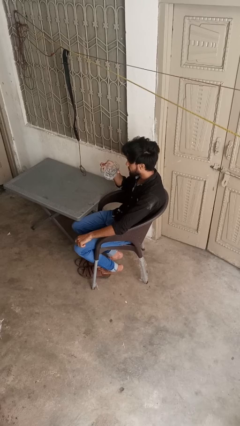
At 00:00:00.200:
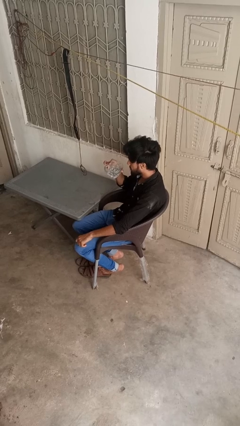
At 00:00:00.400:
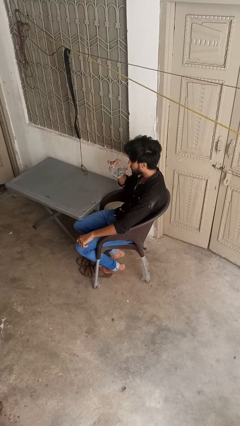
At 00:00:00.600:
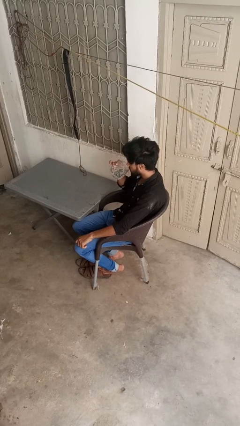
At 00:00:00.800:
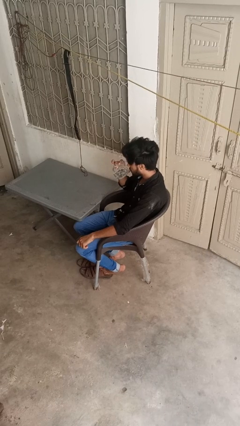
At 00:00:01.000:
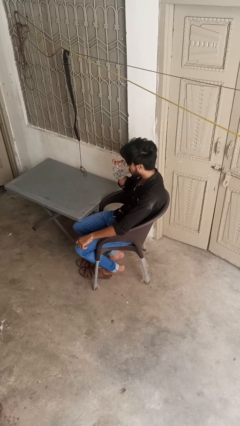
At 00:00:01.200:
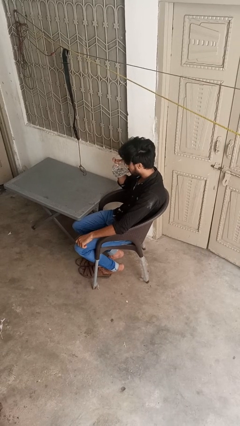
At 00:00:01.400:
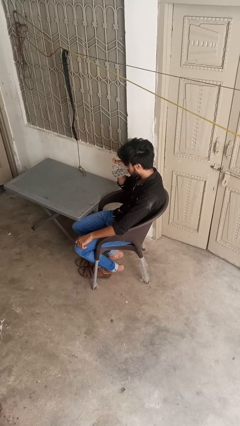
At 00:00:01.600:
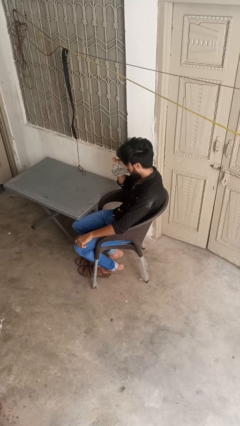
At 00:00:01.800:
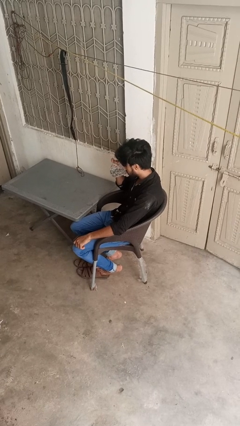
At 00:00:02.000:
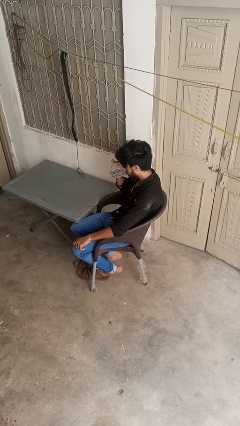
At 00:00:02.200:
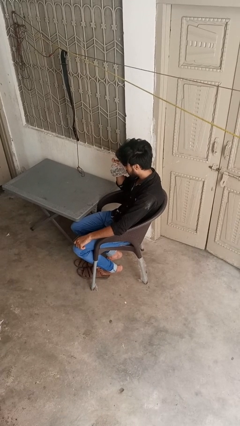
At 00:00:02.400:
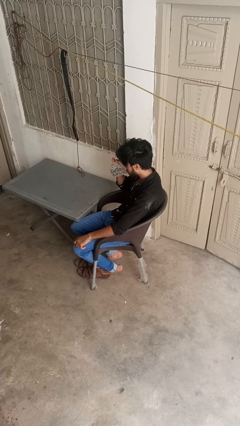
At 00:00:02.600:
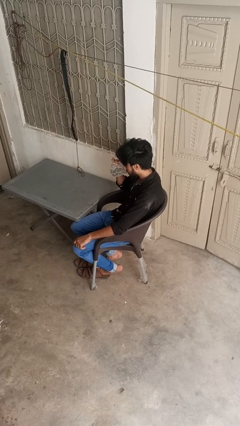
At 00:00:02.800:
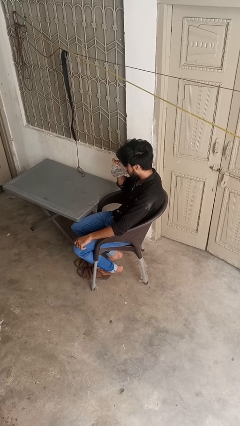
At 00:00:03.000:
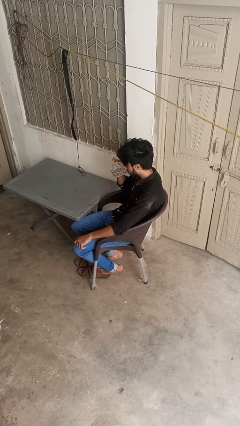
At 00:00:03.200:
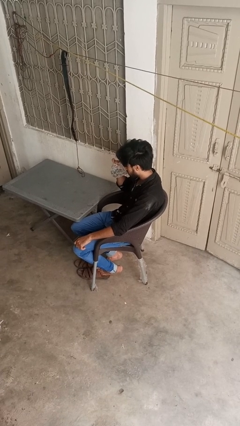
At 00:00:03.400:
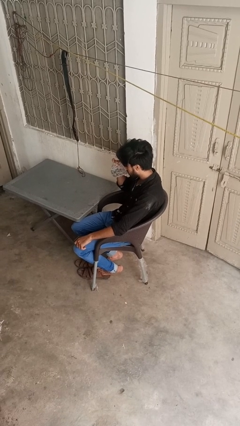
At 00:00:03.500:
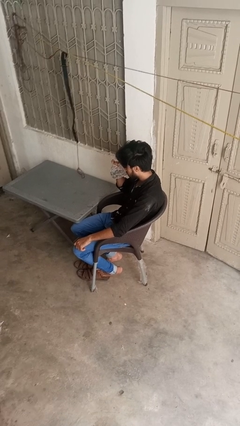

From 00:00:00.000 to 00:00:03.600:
person drinks from mug

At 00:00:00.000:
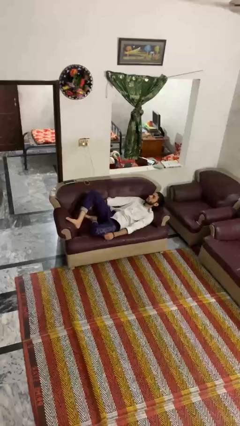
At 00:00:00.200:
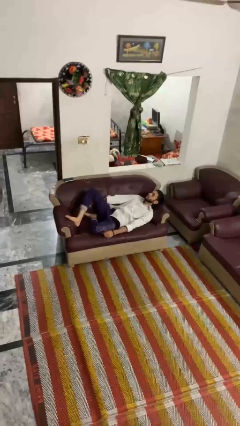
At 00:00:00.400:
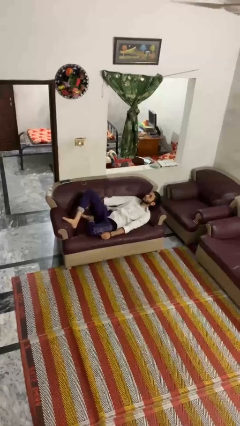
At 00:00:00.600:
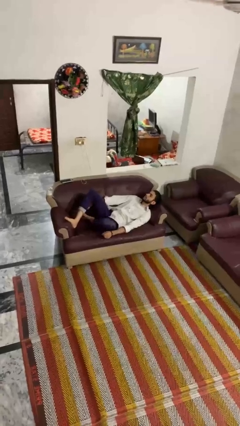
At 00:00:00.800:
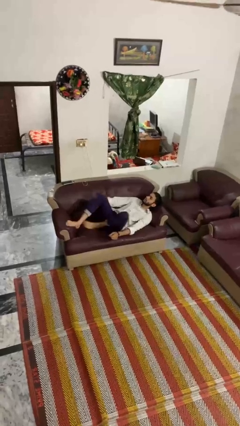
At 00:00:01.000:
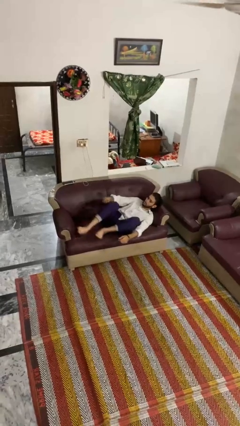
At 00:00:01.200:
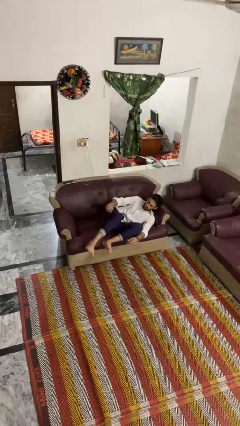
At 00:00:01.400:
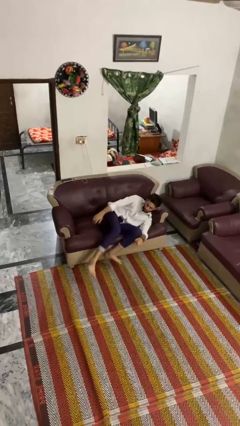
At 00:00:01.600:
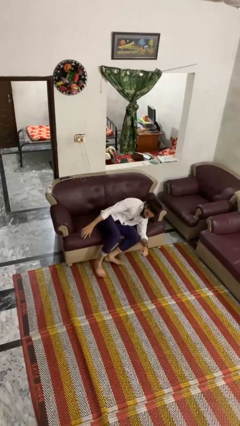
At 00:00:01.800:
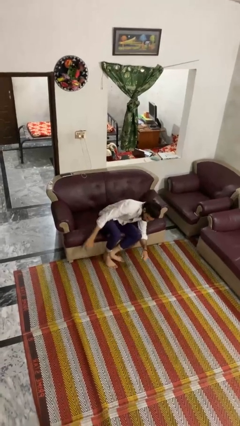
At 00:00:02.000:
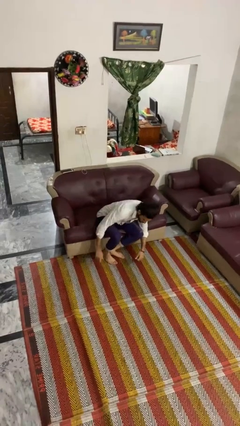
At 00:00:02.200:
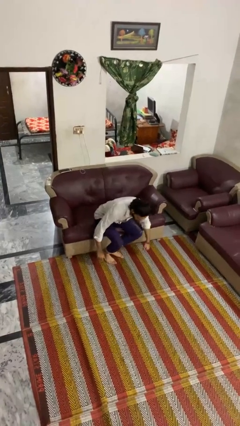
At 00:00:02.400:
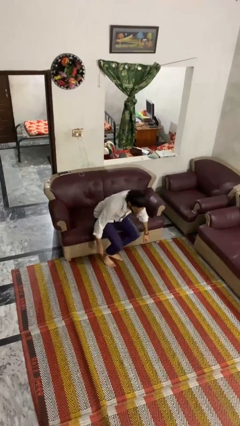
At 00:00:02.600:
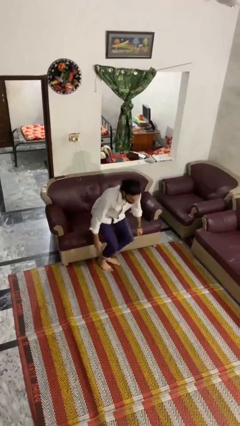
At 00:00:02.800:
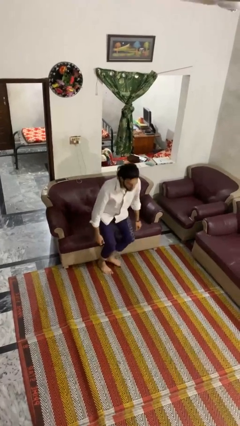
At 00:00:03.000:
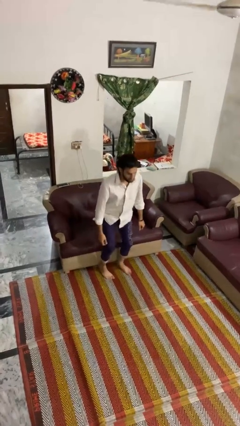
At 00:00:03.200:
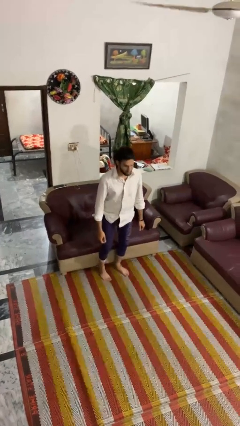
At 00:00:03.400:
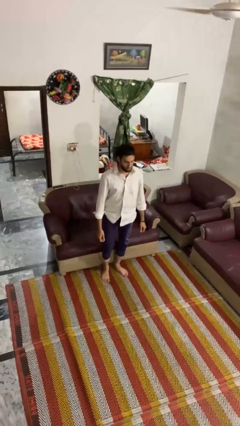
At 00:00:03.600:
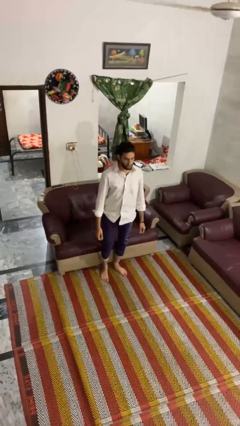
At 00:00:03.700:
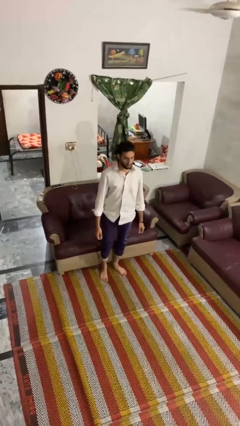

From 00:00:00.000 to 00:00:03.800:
person stands up

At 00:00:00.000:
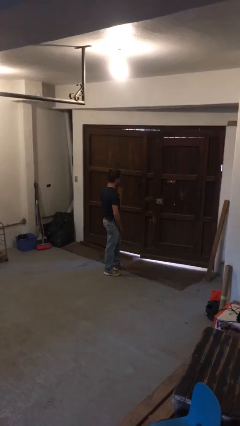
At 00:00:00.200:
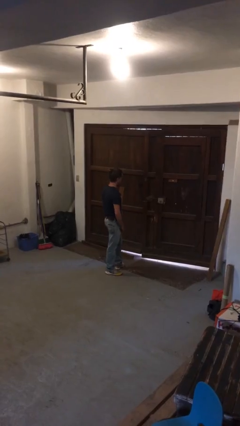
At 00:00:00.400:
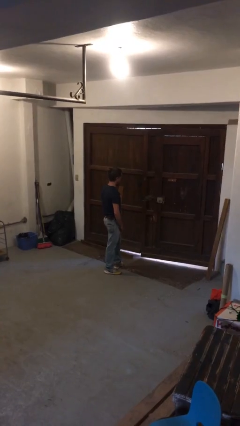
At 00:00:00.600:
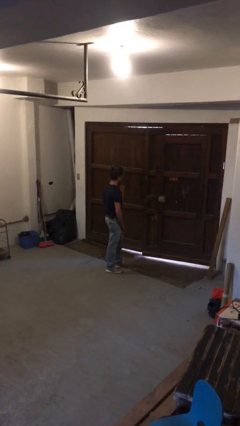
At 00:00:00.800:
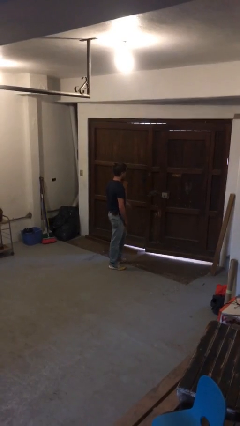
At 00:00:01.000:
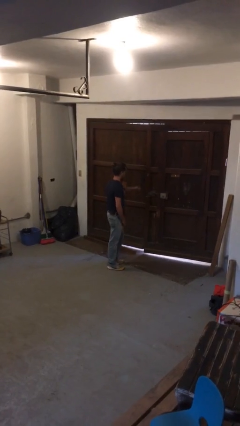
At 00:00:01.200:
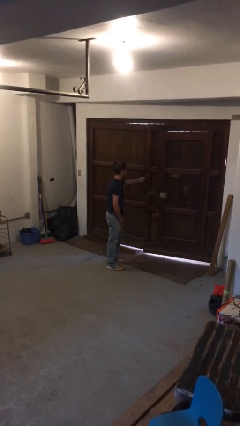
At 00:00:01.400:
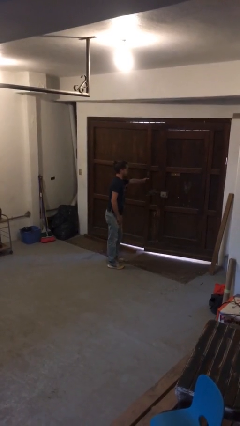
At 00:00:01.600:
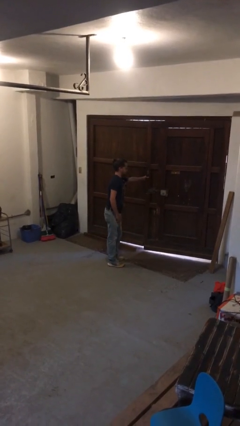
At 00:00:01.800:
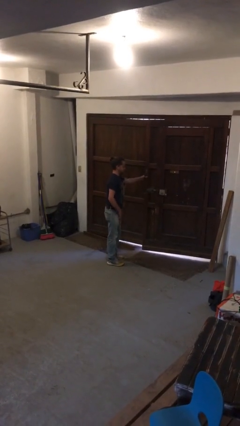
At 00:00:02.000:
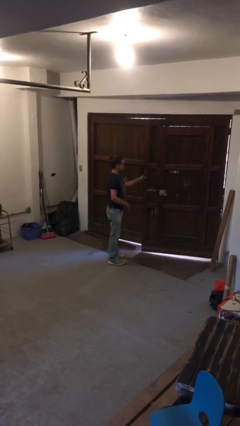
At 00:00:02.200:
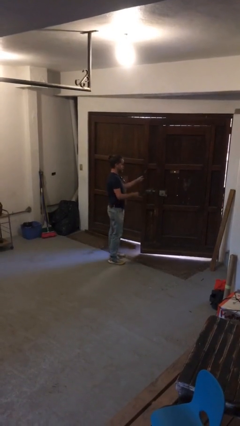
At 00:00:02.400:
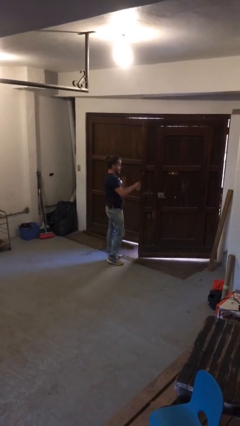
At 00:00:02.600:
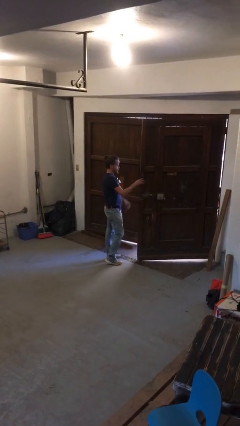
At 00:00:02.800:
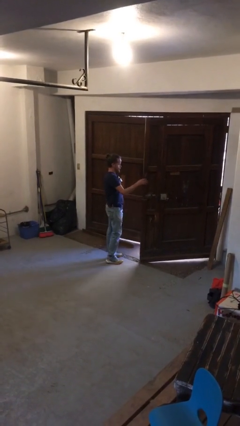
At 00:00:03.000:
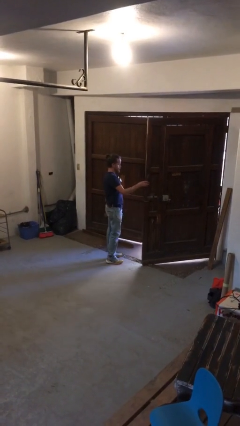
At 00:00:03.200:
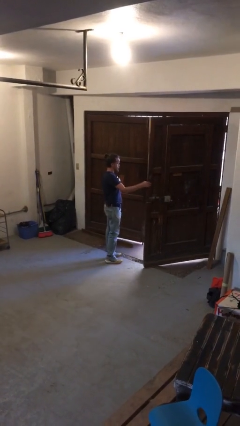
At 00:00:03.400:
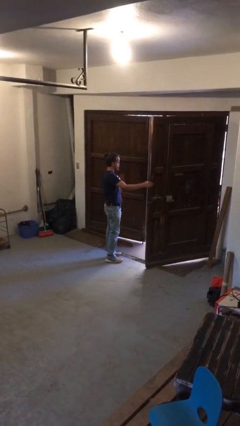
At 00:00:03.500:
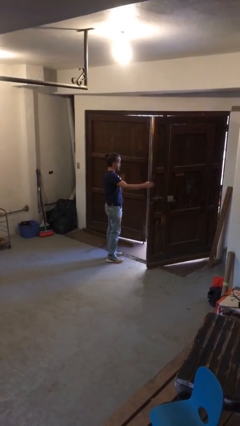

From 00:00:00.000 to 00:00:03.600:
person opens gate

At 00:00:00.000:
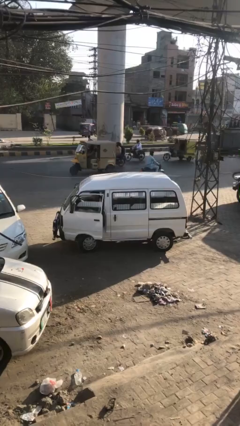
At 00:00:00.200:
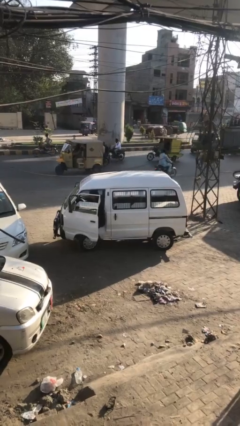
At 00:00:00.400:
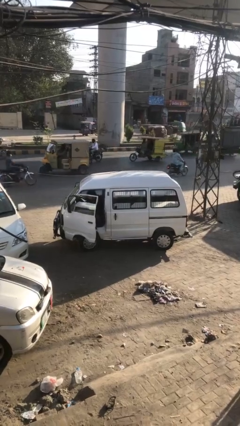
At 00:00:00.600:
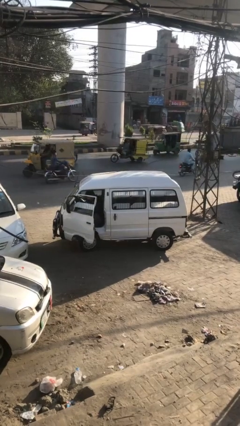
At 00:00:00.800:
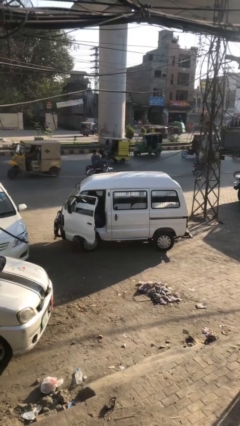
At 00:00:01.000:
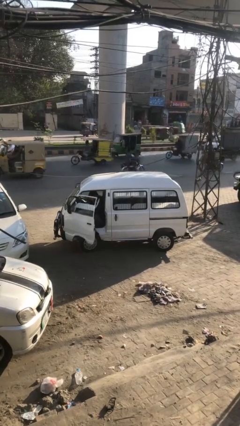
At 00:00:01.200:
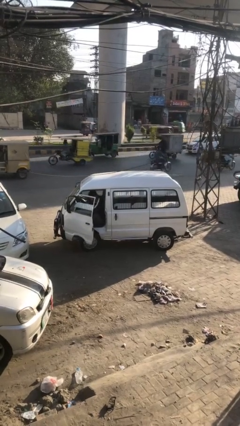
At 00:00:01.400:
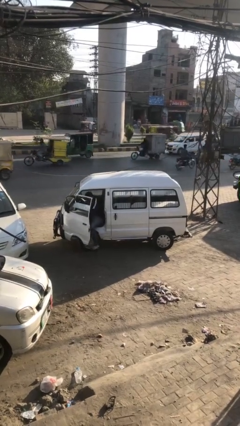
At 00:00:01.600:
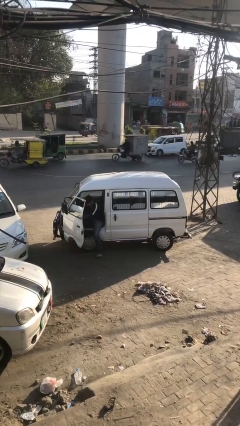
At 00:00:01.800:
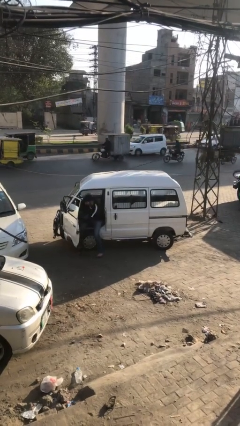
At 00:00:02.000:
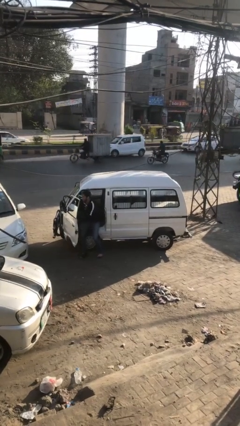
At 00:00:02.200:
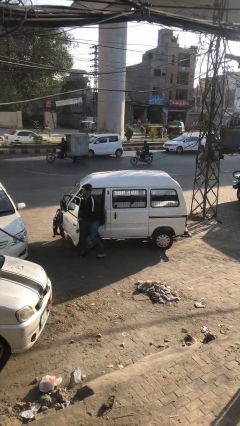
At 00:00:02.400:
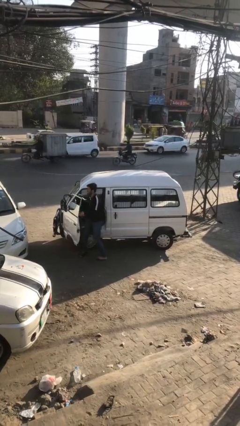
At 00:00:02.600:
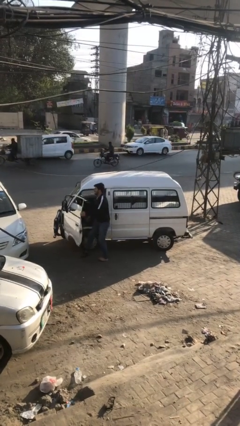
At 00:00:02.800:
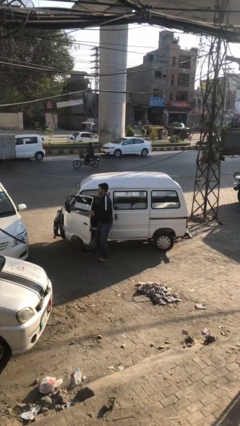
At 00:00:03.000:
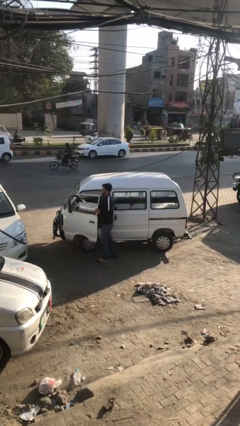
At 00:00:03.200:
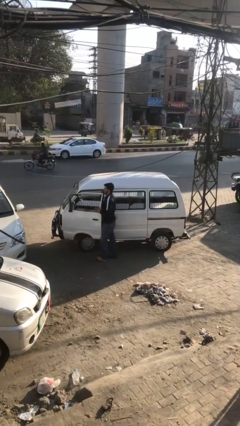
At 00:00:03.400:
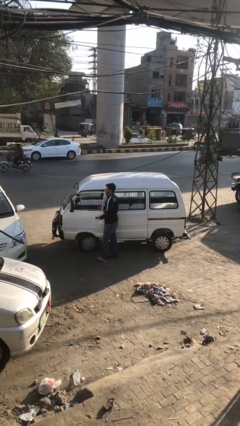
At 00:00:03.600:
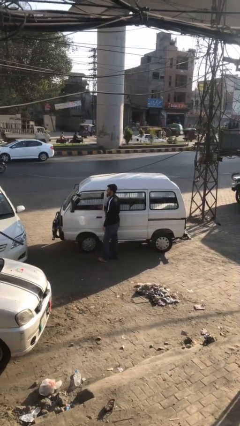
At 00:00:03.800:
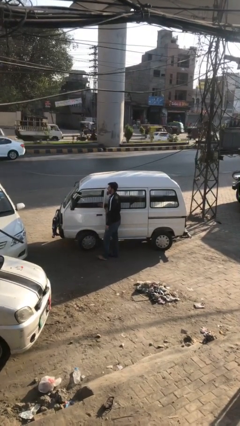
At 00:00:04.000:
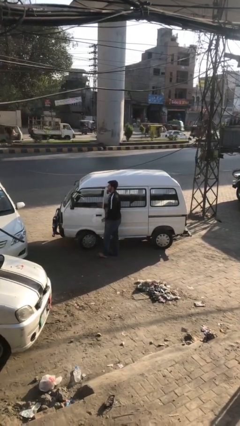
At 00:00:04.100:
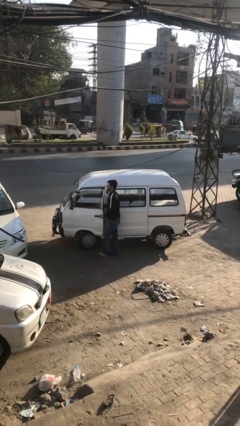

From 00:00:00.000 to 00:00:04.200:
car drops off person

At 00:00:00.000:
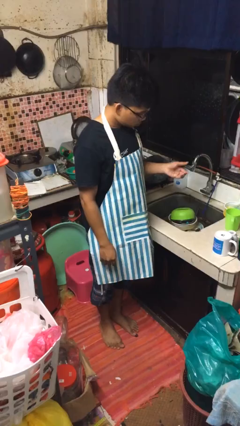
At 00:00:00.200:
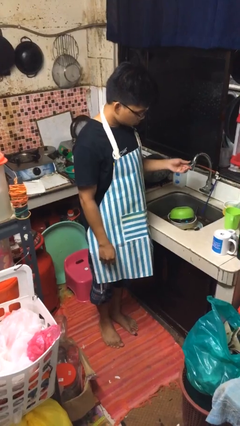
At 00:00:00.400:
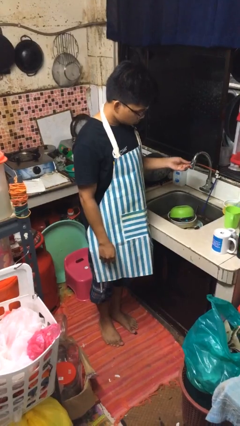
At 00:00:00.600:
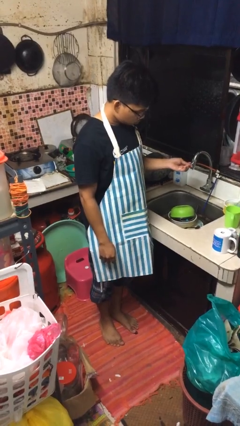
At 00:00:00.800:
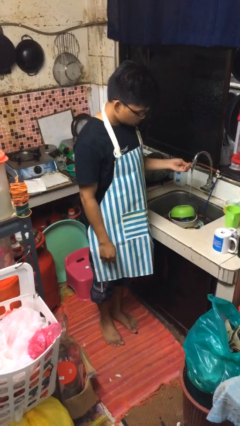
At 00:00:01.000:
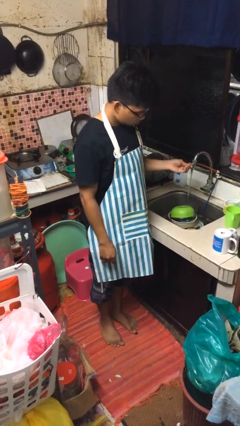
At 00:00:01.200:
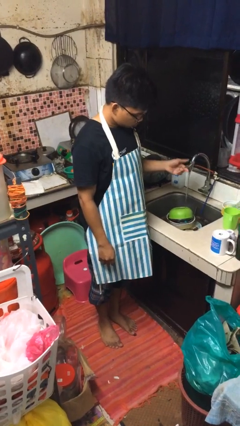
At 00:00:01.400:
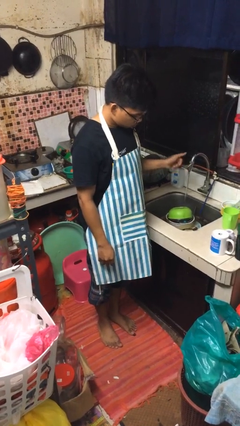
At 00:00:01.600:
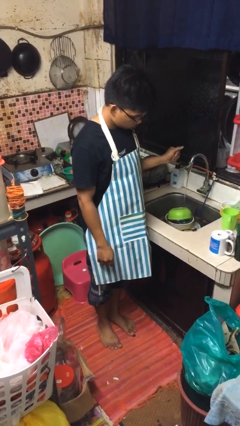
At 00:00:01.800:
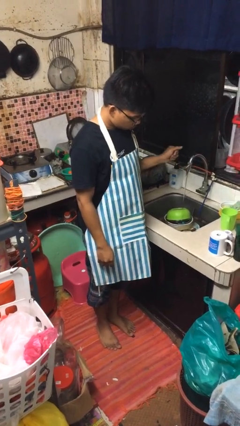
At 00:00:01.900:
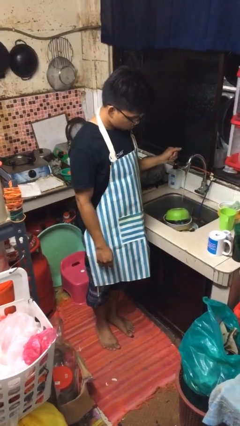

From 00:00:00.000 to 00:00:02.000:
person turns on faucet
